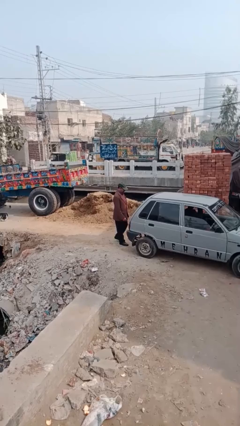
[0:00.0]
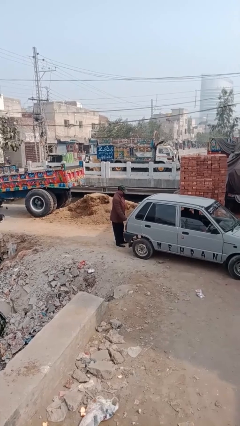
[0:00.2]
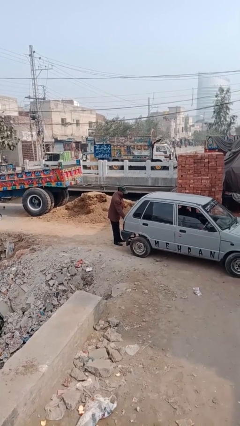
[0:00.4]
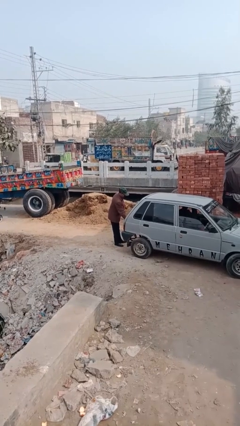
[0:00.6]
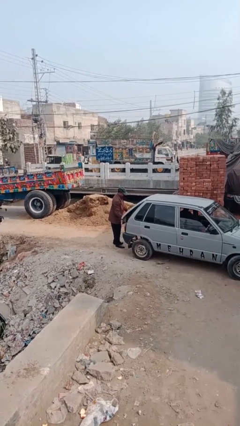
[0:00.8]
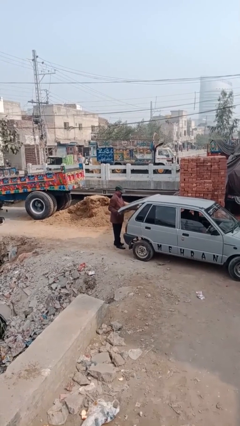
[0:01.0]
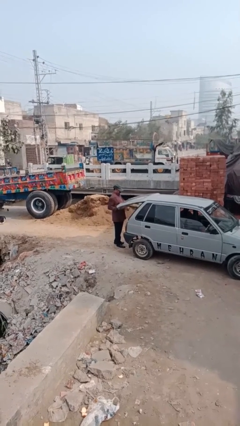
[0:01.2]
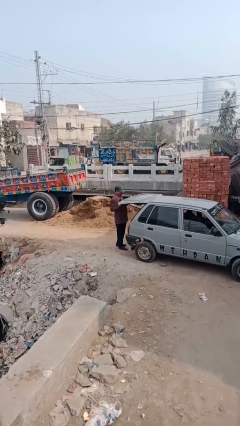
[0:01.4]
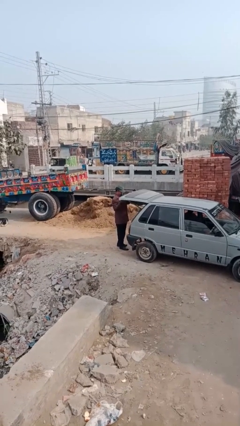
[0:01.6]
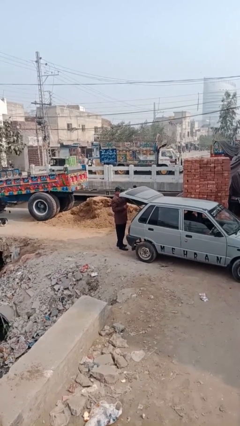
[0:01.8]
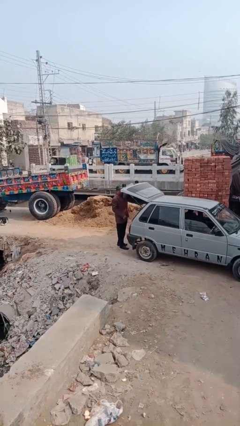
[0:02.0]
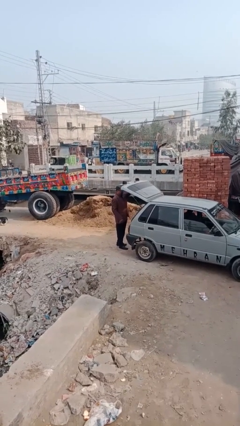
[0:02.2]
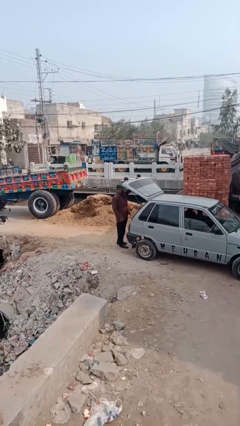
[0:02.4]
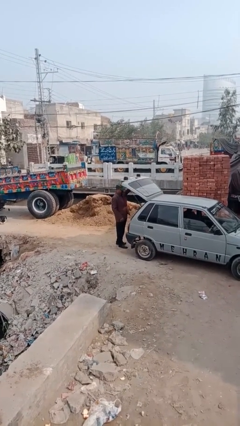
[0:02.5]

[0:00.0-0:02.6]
person opens car trunk

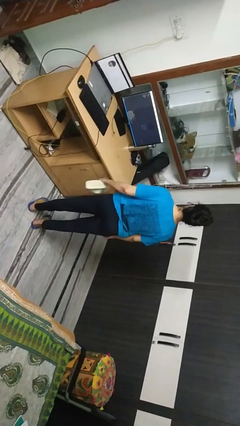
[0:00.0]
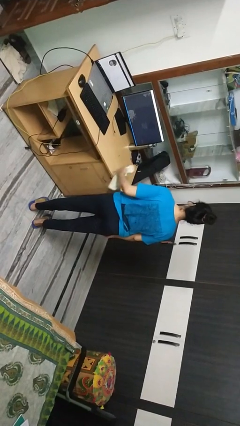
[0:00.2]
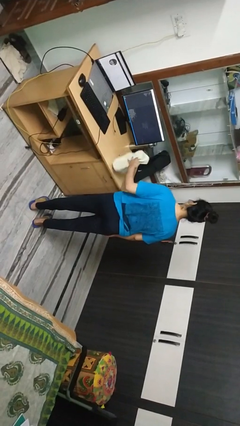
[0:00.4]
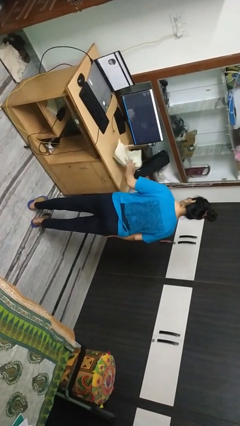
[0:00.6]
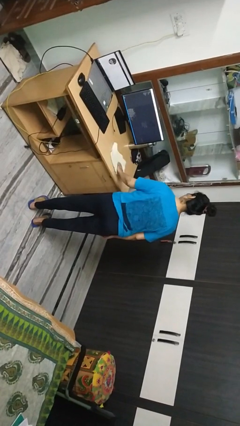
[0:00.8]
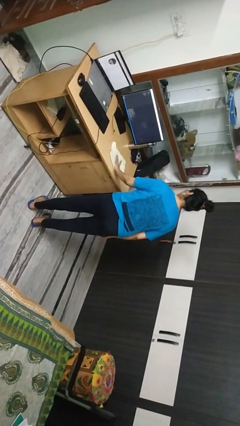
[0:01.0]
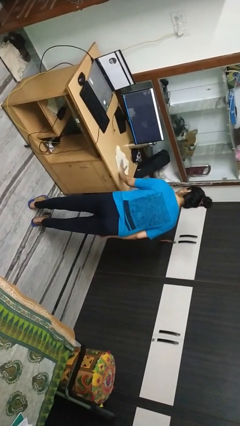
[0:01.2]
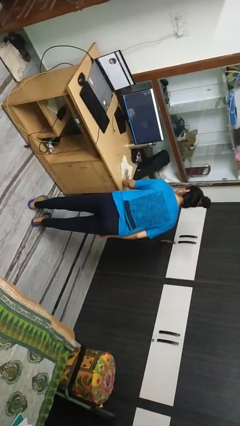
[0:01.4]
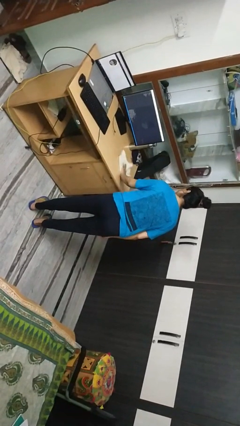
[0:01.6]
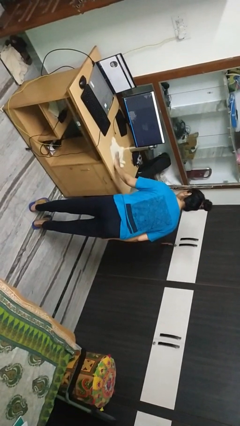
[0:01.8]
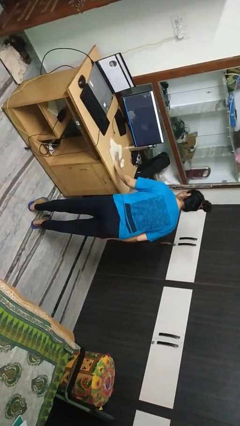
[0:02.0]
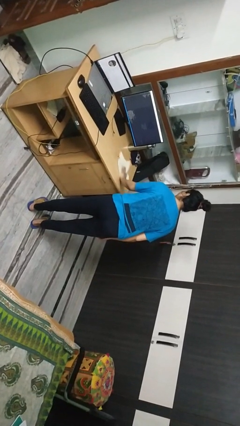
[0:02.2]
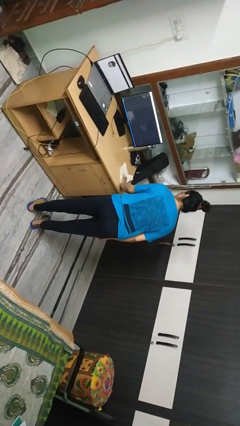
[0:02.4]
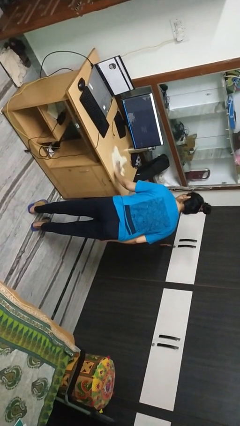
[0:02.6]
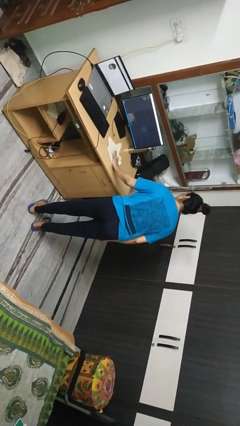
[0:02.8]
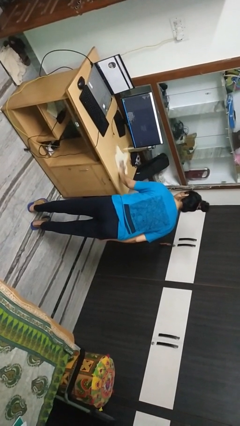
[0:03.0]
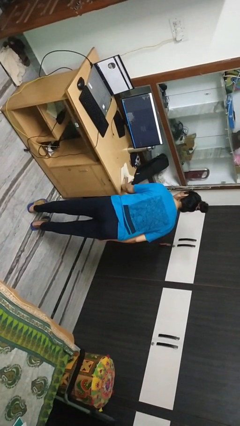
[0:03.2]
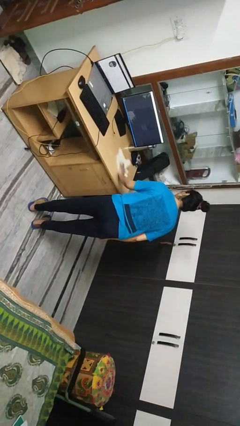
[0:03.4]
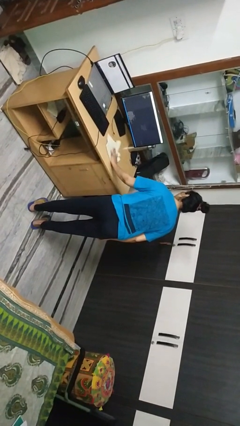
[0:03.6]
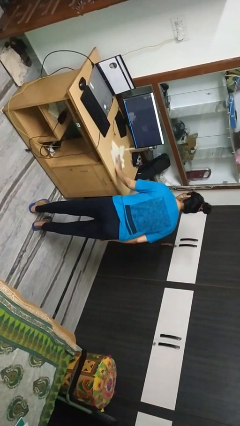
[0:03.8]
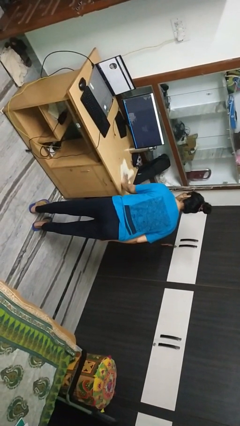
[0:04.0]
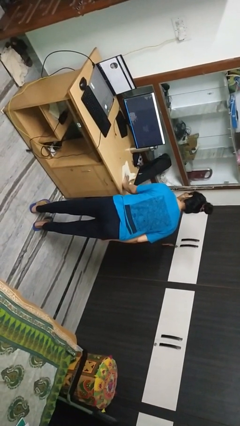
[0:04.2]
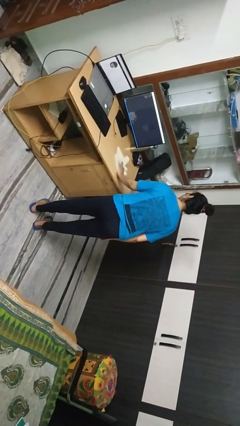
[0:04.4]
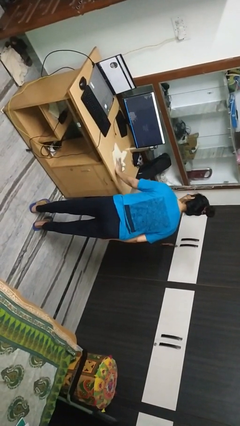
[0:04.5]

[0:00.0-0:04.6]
person cleans table with rag

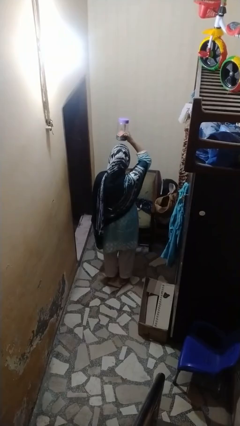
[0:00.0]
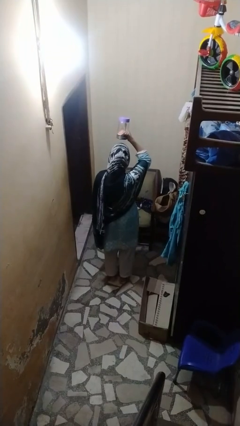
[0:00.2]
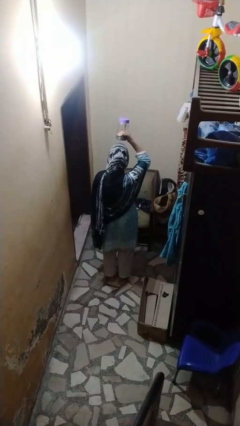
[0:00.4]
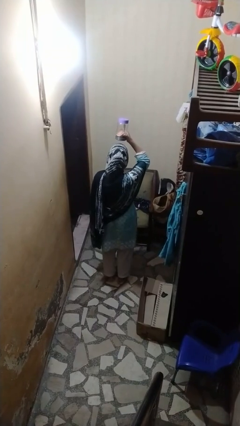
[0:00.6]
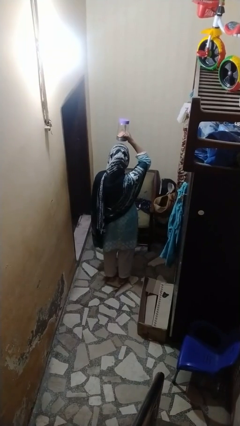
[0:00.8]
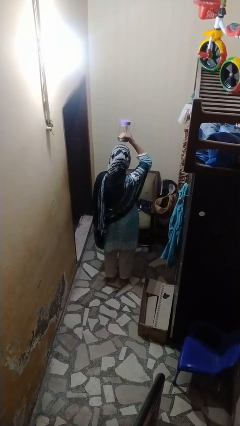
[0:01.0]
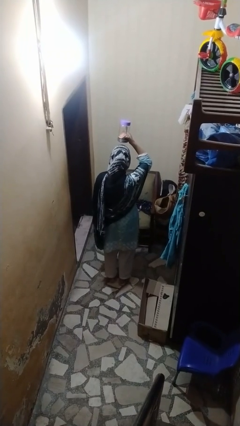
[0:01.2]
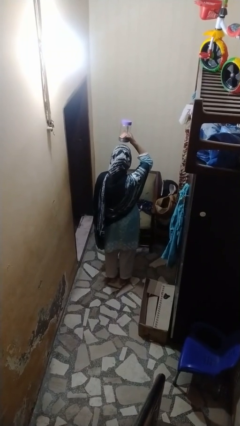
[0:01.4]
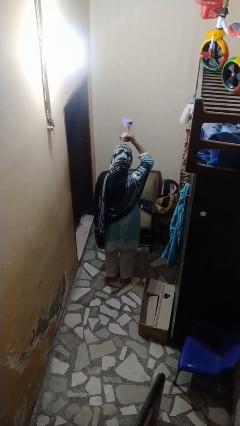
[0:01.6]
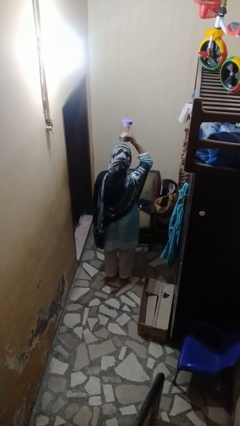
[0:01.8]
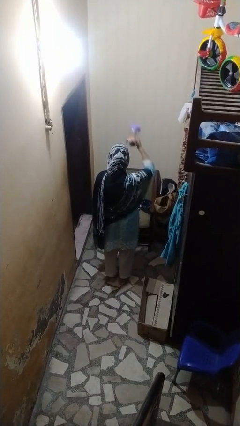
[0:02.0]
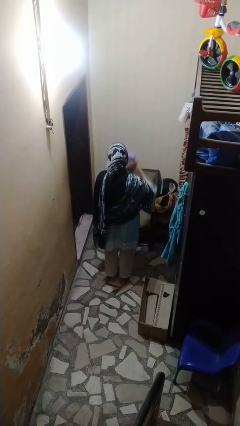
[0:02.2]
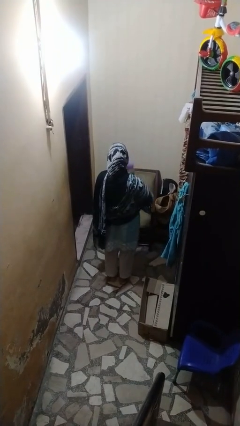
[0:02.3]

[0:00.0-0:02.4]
person holds object above head

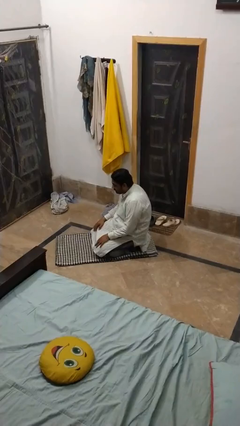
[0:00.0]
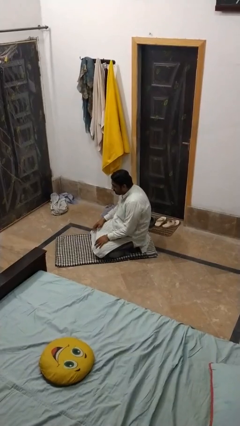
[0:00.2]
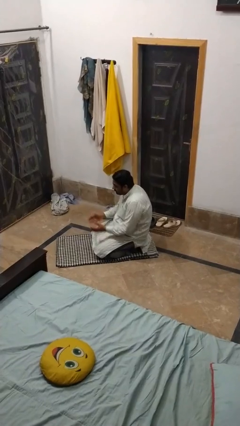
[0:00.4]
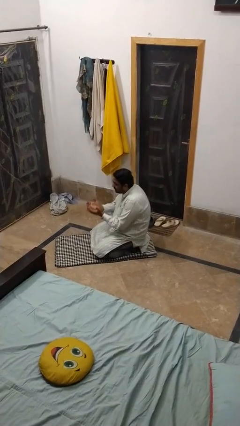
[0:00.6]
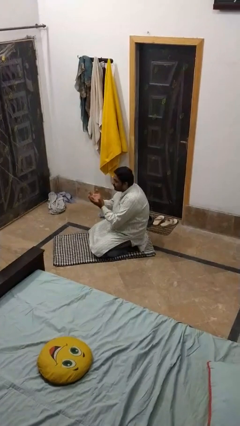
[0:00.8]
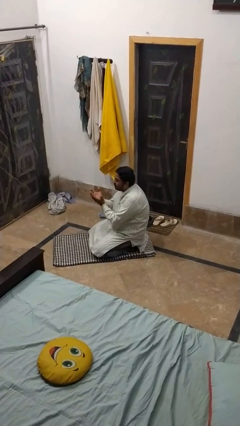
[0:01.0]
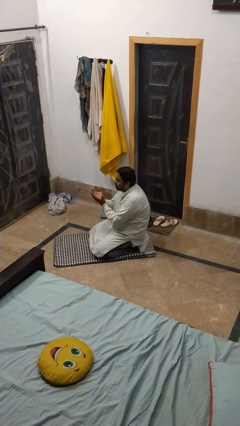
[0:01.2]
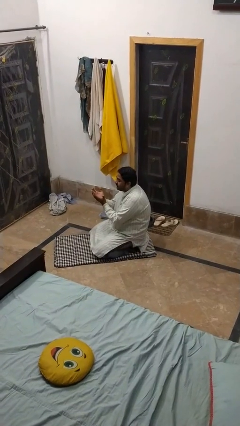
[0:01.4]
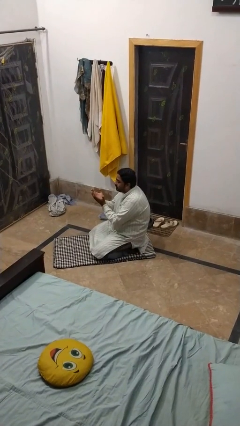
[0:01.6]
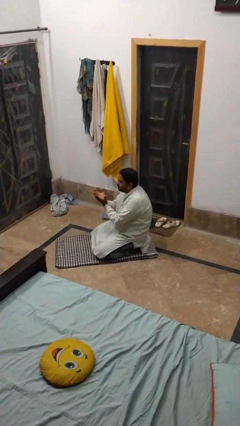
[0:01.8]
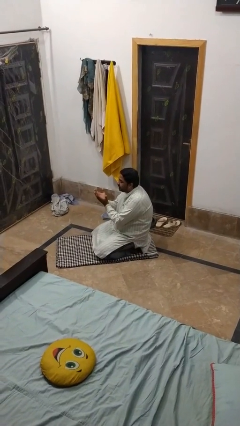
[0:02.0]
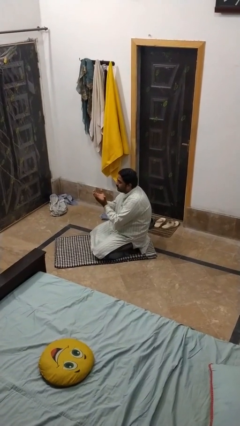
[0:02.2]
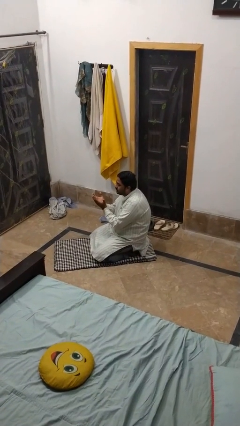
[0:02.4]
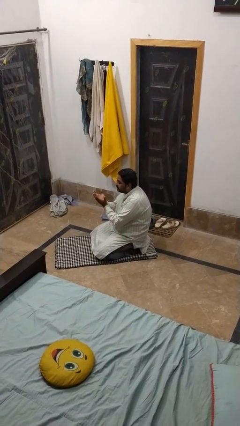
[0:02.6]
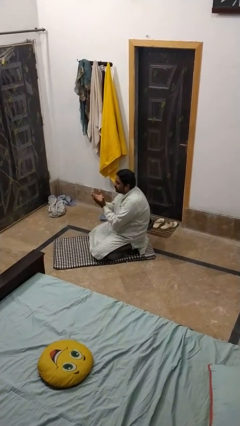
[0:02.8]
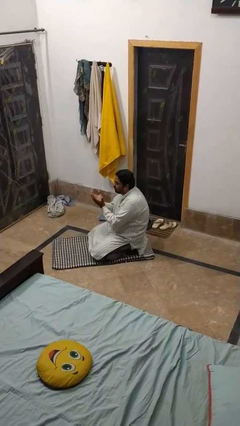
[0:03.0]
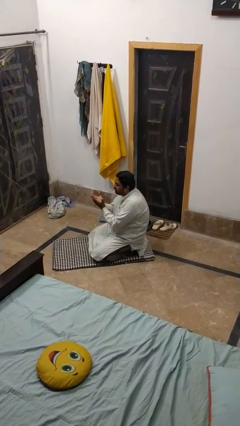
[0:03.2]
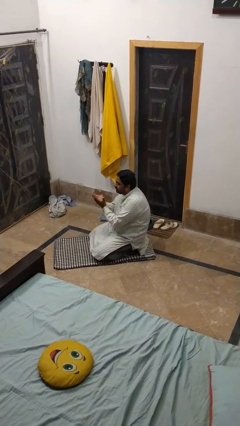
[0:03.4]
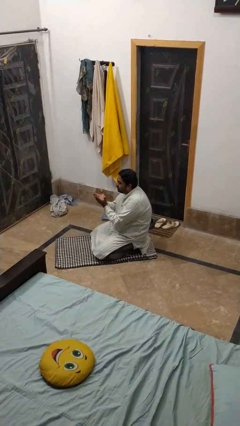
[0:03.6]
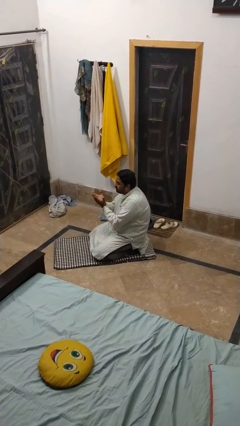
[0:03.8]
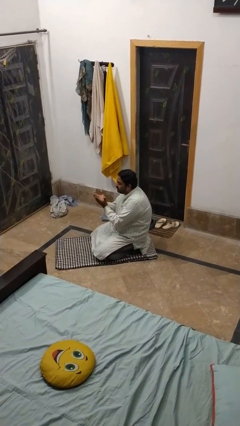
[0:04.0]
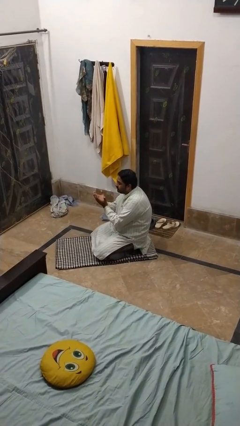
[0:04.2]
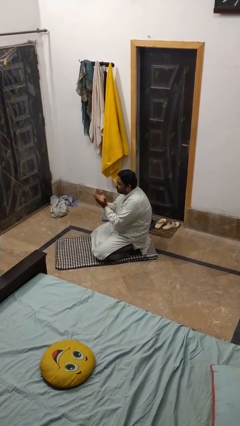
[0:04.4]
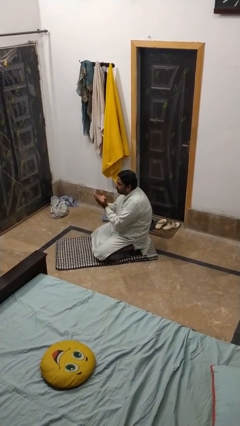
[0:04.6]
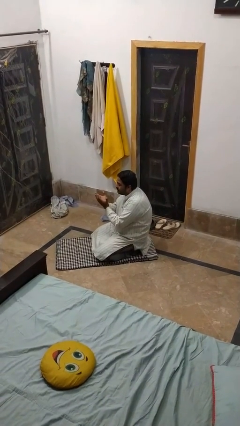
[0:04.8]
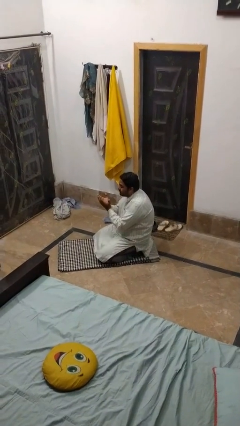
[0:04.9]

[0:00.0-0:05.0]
person prays

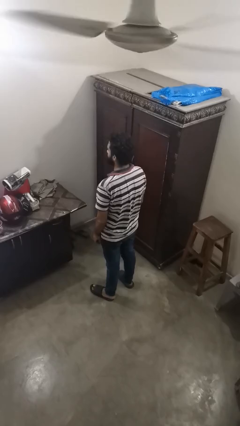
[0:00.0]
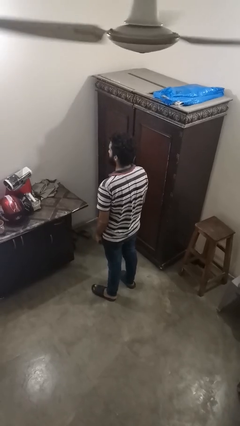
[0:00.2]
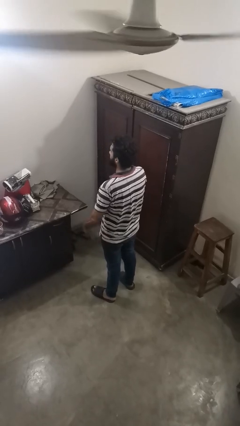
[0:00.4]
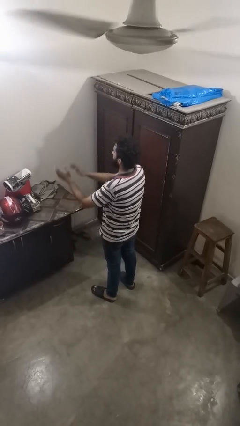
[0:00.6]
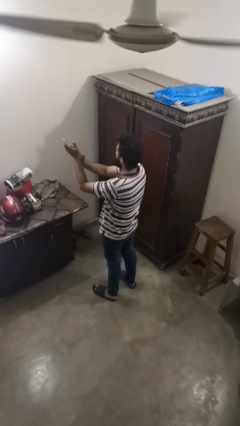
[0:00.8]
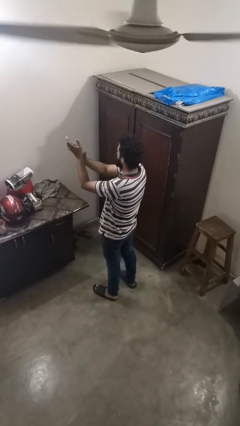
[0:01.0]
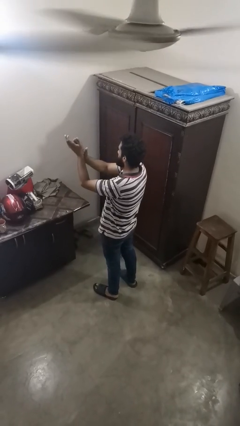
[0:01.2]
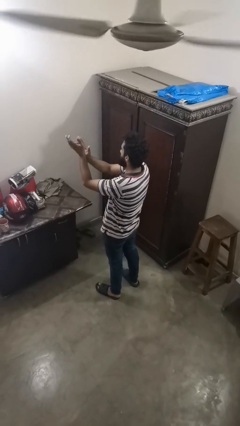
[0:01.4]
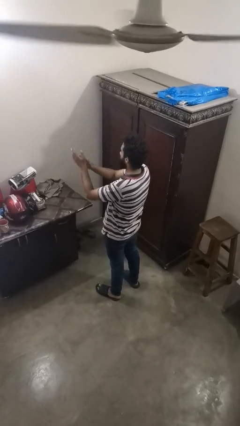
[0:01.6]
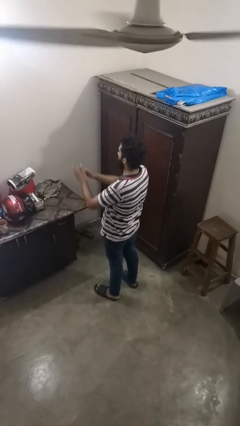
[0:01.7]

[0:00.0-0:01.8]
person claps hands

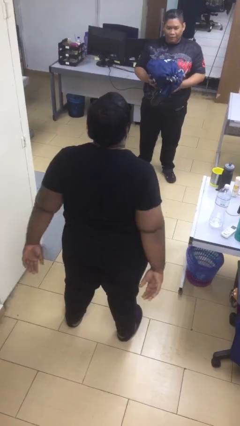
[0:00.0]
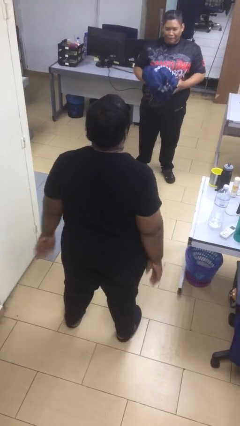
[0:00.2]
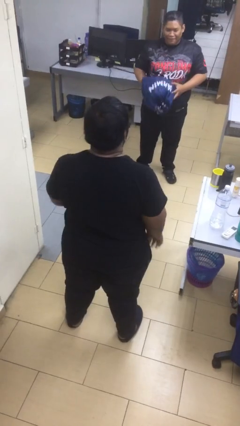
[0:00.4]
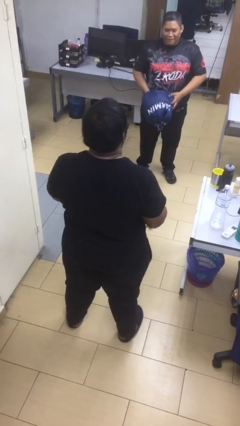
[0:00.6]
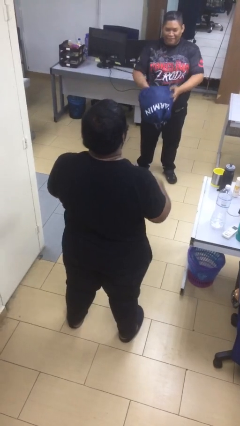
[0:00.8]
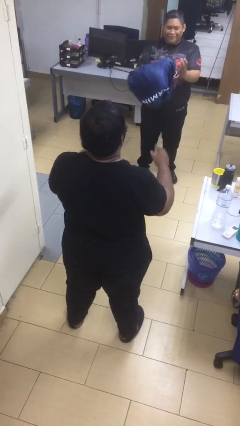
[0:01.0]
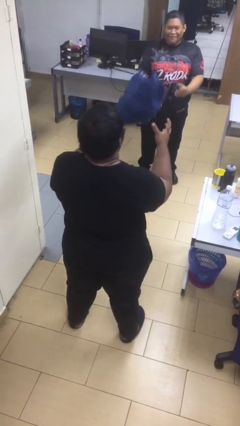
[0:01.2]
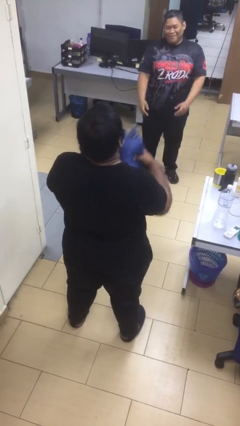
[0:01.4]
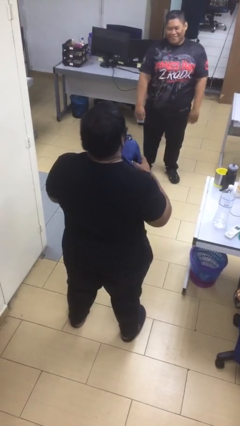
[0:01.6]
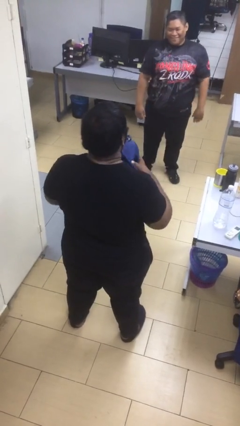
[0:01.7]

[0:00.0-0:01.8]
person catches object from person
